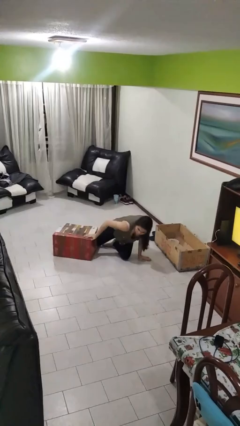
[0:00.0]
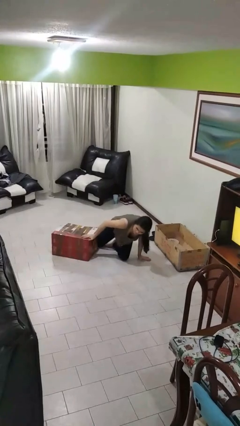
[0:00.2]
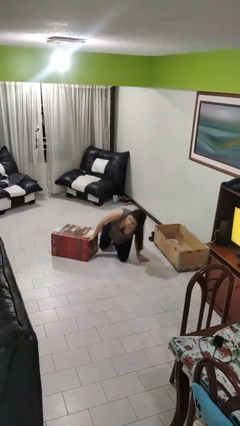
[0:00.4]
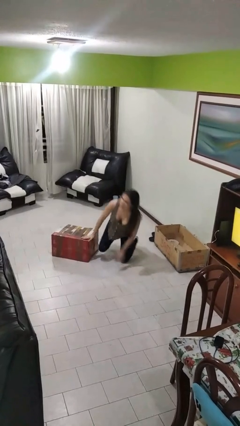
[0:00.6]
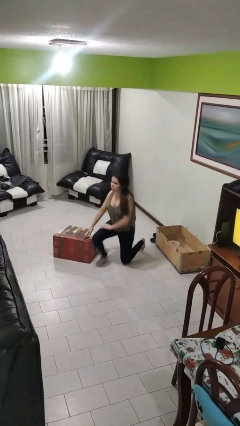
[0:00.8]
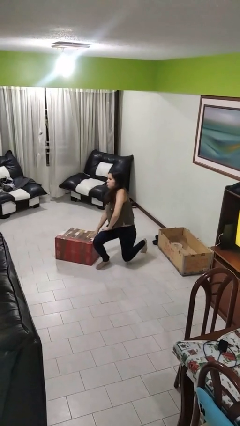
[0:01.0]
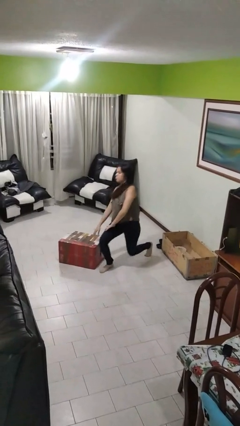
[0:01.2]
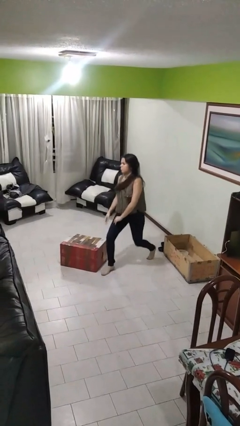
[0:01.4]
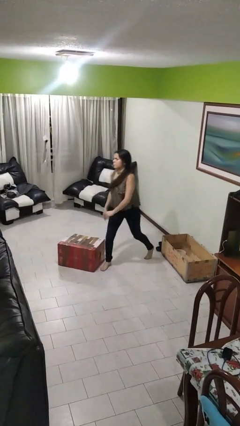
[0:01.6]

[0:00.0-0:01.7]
person stands up from floor

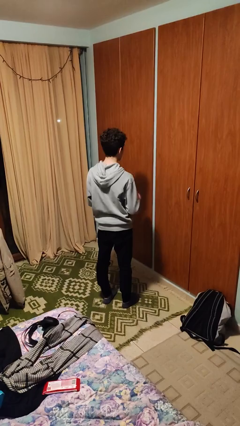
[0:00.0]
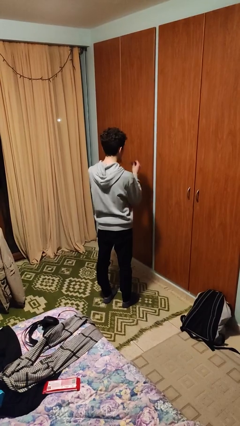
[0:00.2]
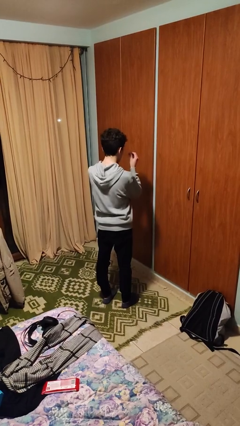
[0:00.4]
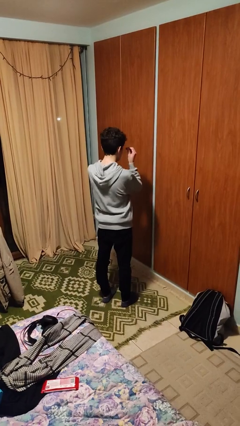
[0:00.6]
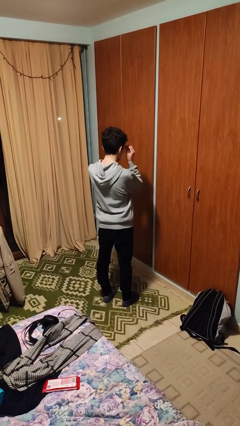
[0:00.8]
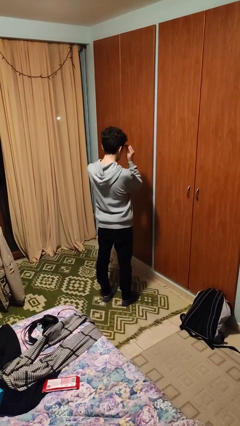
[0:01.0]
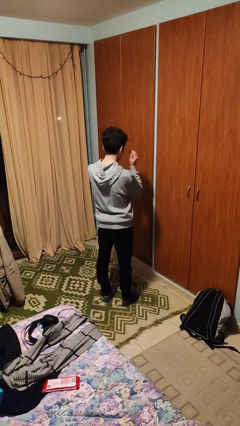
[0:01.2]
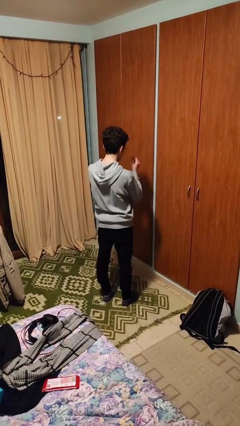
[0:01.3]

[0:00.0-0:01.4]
person puts on glasses

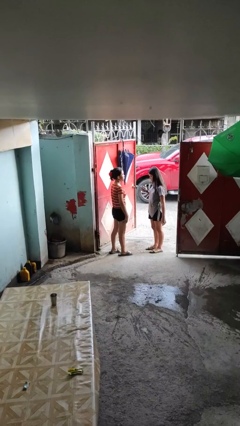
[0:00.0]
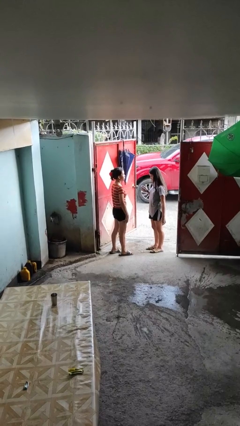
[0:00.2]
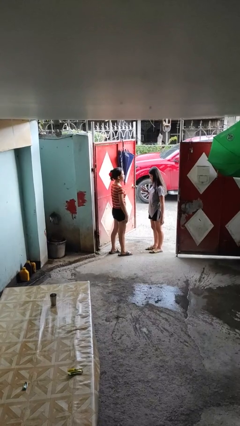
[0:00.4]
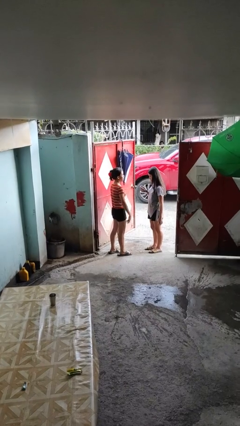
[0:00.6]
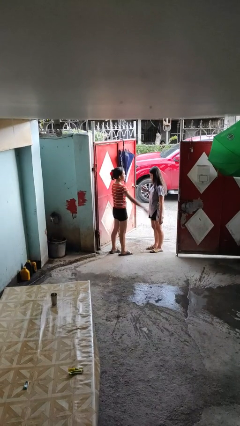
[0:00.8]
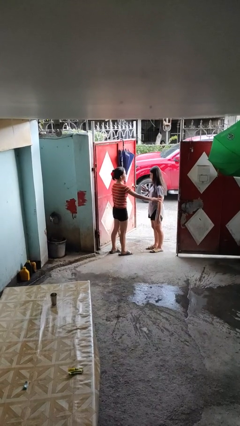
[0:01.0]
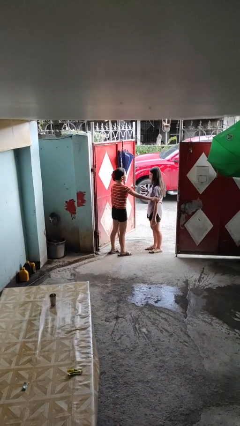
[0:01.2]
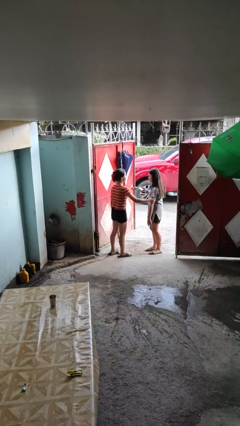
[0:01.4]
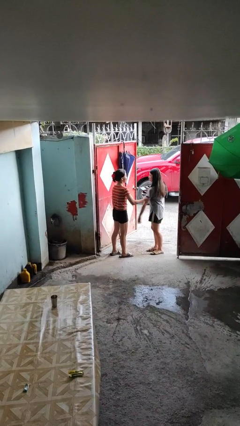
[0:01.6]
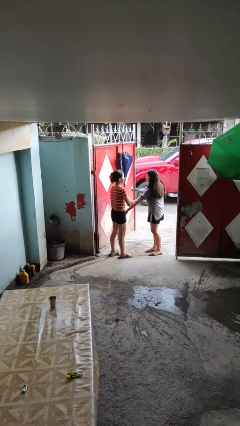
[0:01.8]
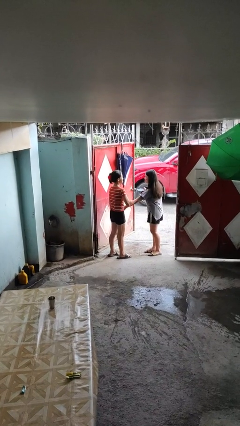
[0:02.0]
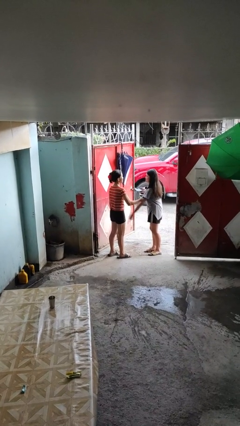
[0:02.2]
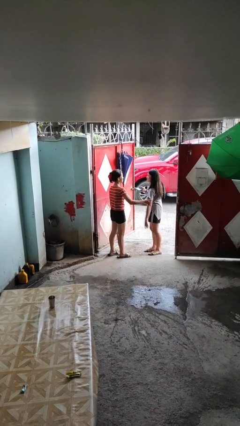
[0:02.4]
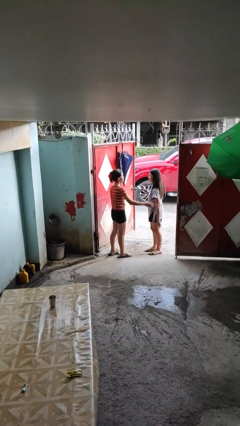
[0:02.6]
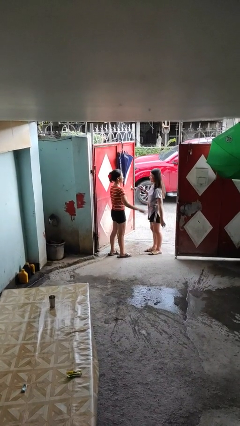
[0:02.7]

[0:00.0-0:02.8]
person grabs person by bicep

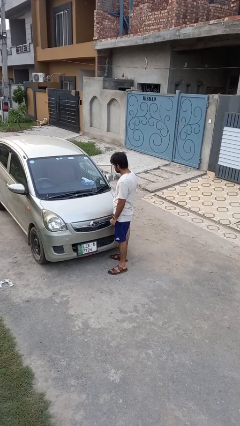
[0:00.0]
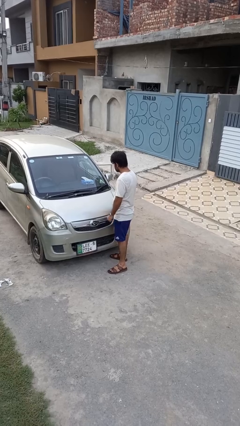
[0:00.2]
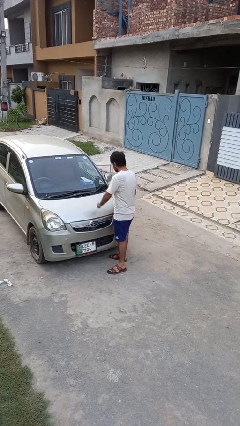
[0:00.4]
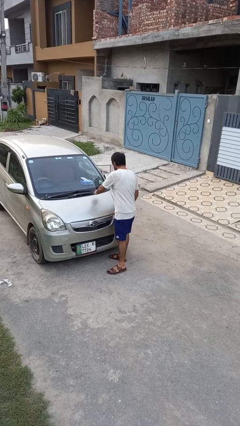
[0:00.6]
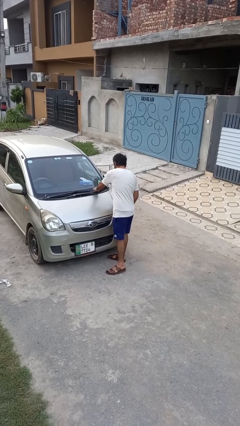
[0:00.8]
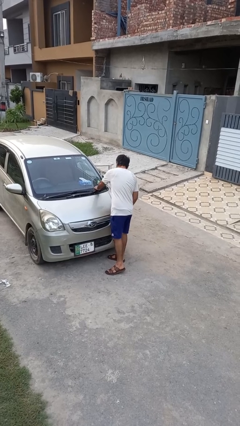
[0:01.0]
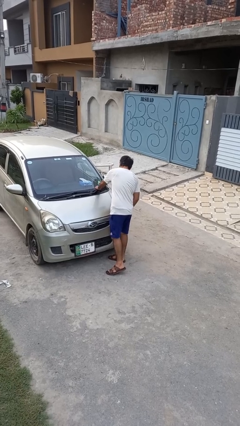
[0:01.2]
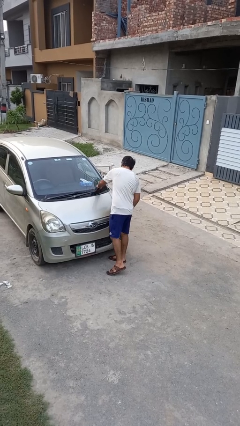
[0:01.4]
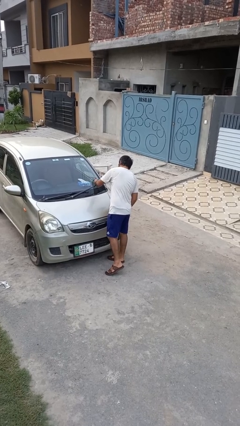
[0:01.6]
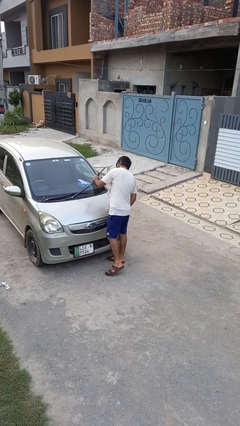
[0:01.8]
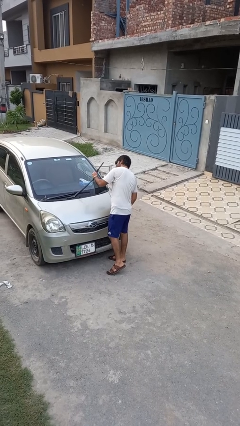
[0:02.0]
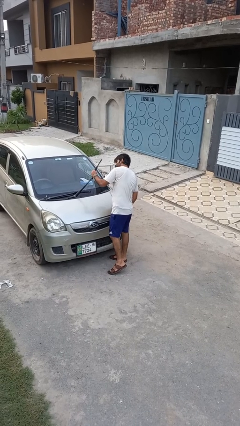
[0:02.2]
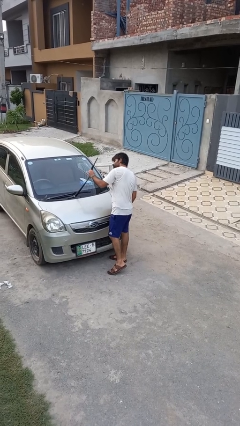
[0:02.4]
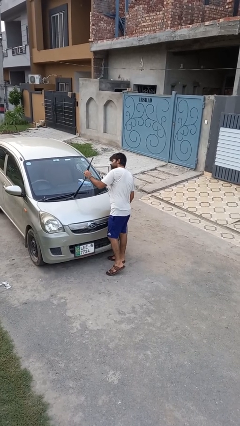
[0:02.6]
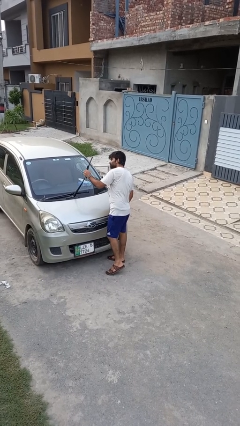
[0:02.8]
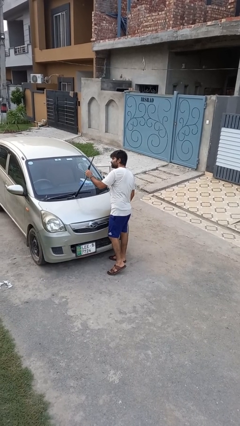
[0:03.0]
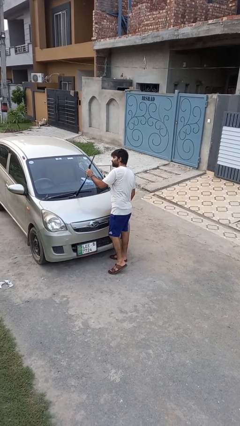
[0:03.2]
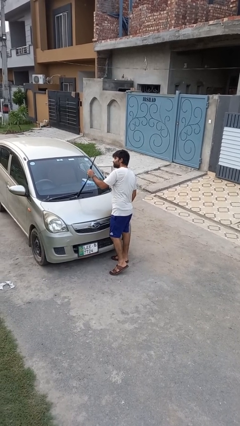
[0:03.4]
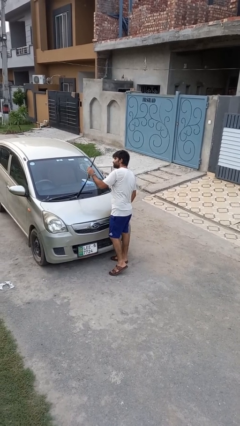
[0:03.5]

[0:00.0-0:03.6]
person flips up car wipers

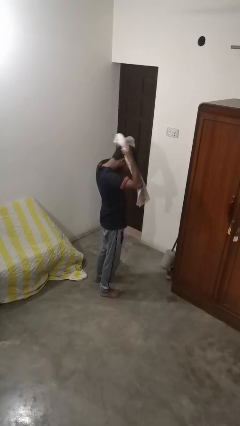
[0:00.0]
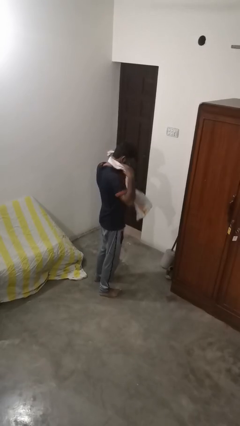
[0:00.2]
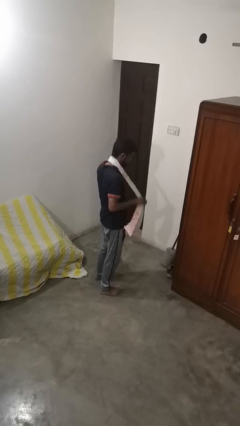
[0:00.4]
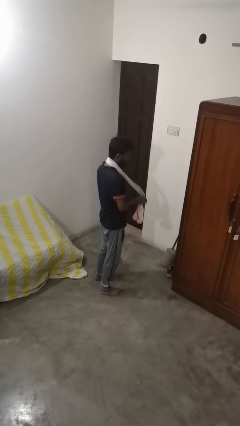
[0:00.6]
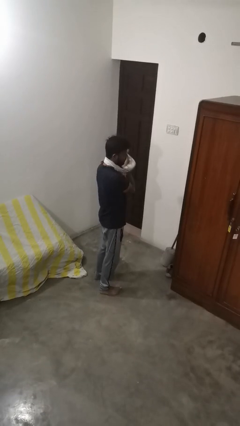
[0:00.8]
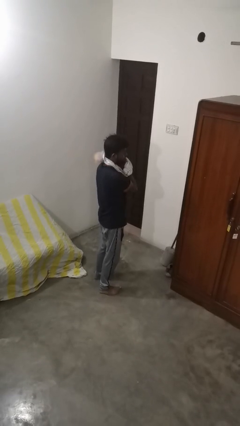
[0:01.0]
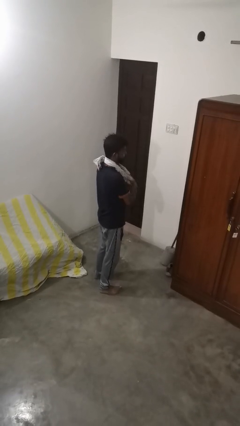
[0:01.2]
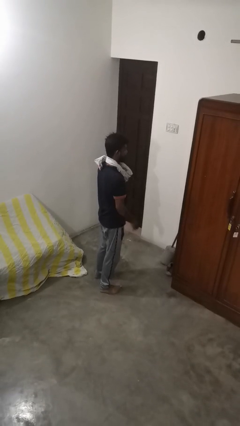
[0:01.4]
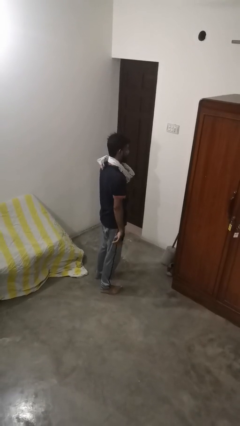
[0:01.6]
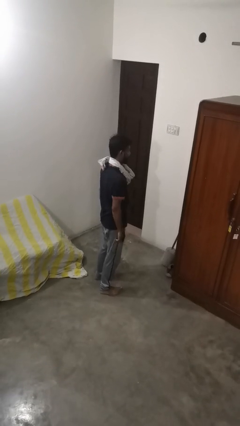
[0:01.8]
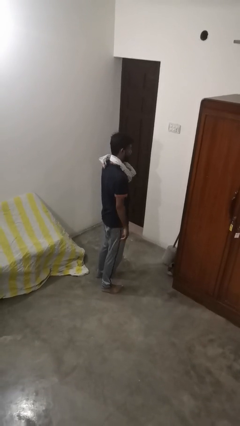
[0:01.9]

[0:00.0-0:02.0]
person puts on scarf

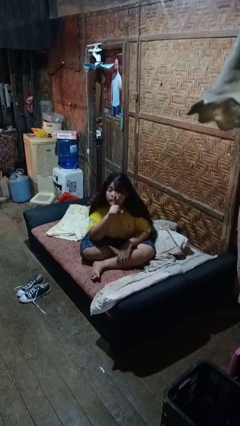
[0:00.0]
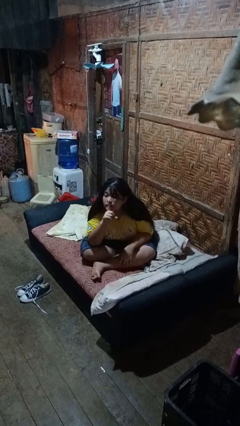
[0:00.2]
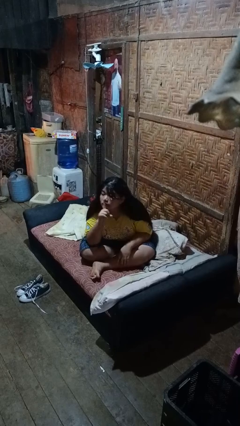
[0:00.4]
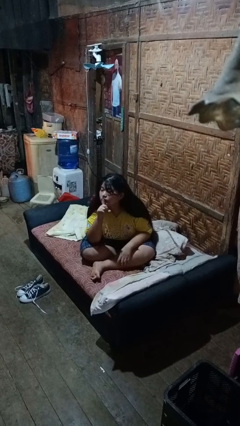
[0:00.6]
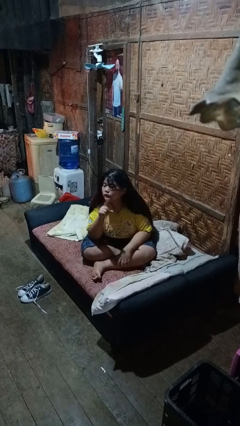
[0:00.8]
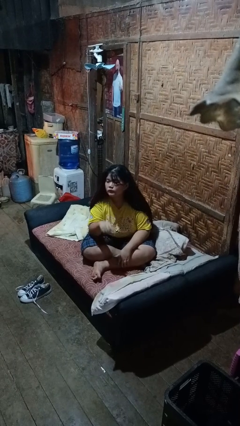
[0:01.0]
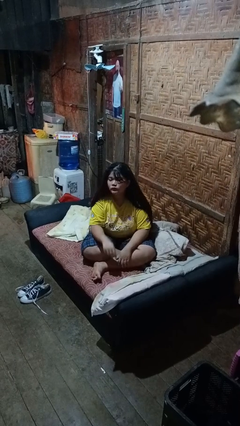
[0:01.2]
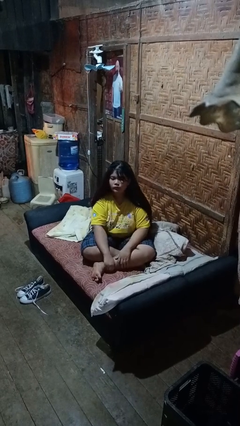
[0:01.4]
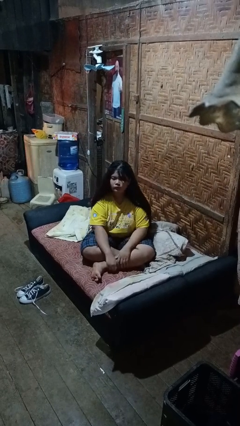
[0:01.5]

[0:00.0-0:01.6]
person gestures be quiet

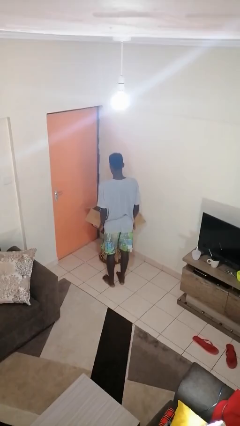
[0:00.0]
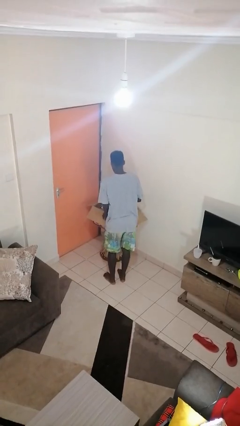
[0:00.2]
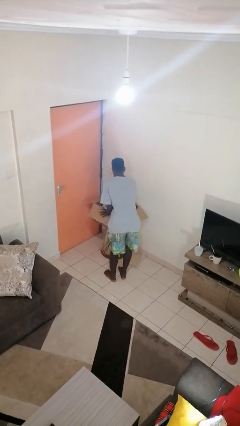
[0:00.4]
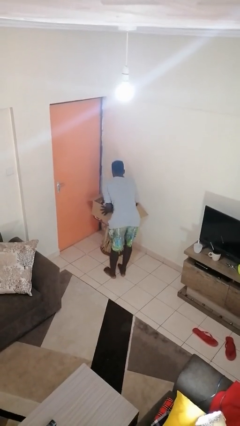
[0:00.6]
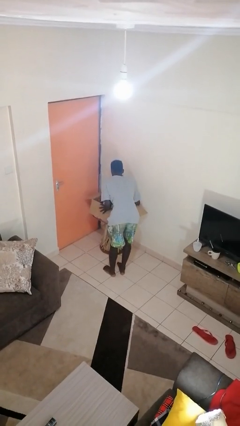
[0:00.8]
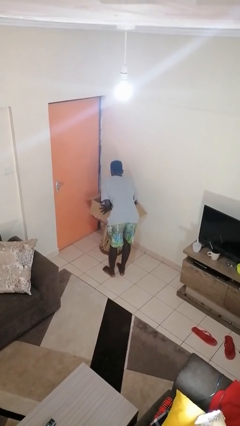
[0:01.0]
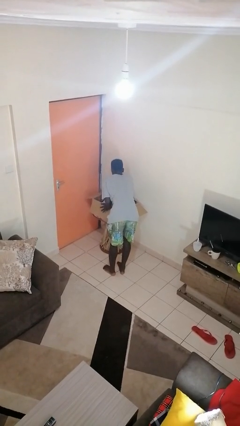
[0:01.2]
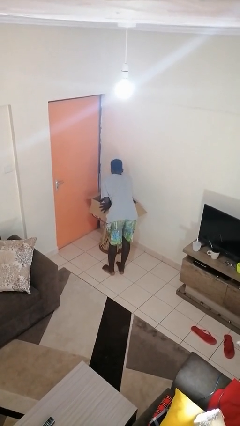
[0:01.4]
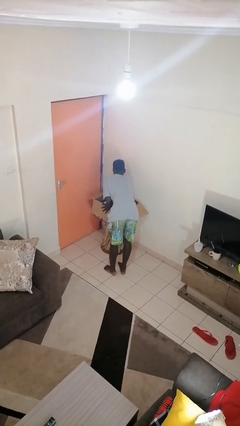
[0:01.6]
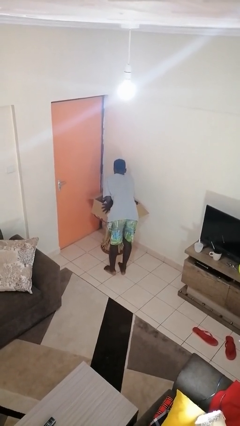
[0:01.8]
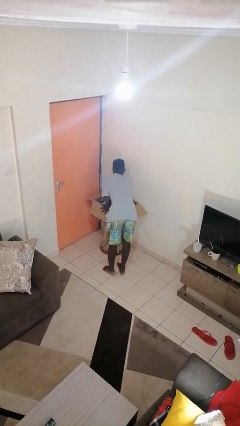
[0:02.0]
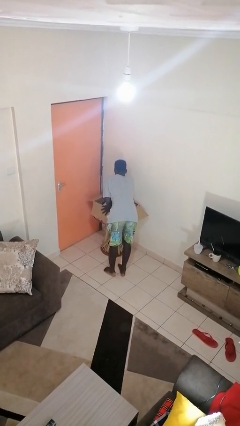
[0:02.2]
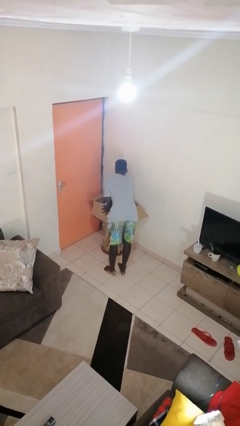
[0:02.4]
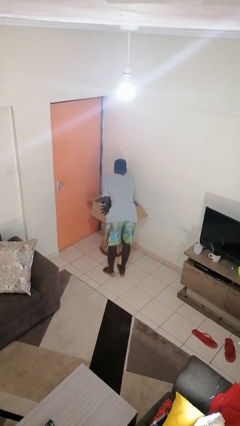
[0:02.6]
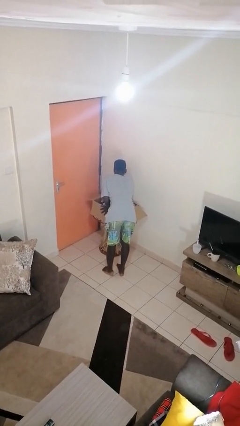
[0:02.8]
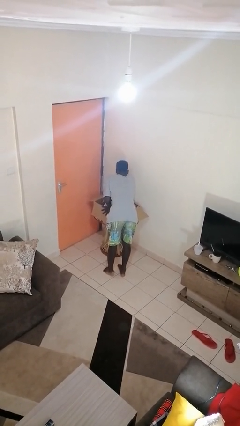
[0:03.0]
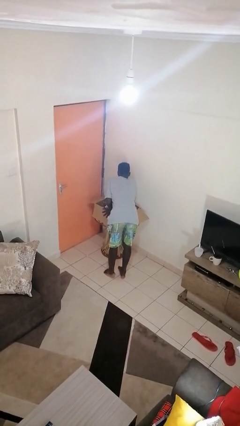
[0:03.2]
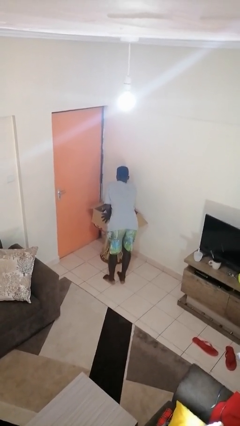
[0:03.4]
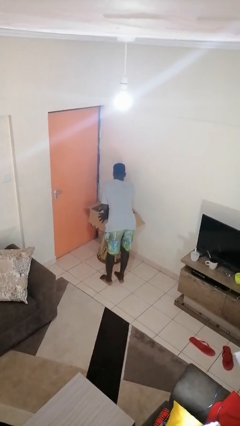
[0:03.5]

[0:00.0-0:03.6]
person searches in box
